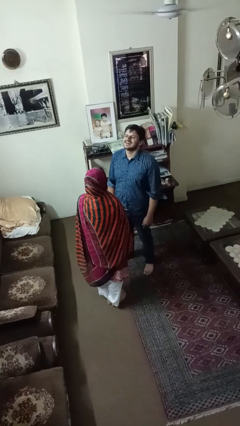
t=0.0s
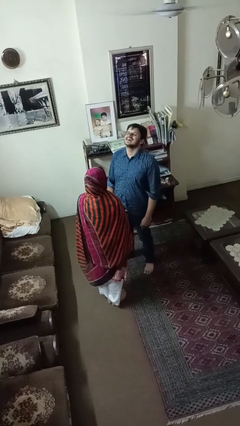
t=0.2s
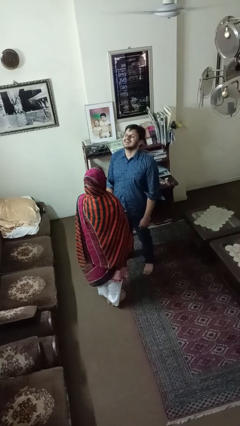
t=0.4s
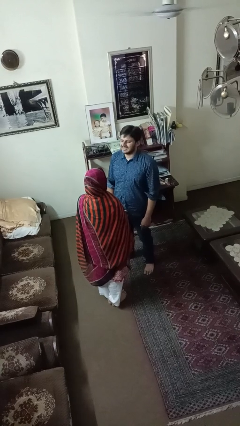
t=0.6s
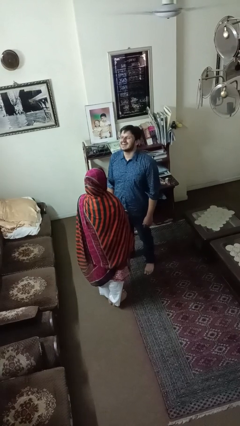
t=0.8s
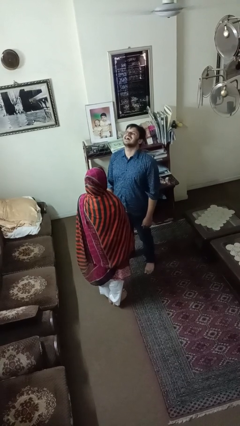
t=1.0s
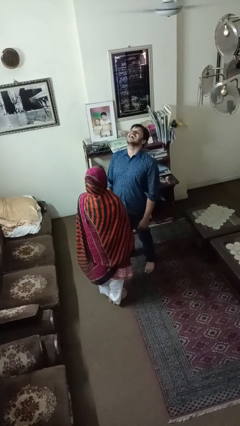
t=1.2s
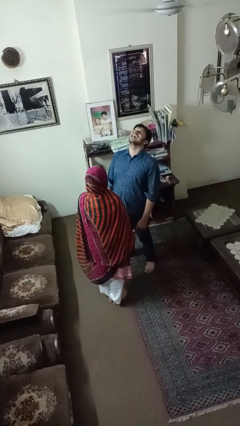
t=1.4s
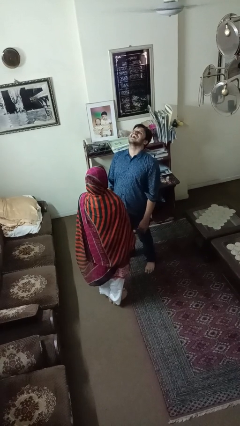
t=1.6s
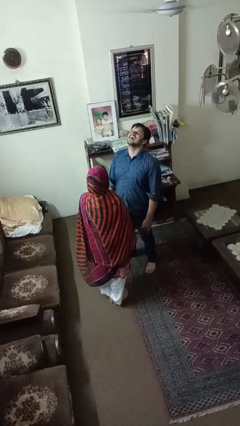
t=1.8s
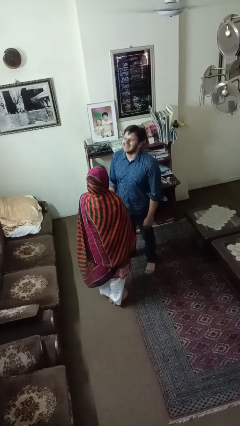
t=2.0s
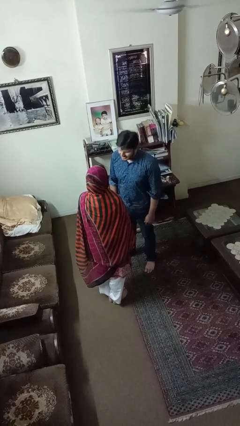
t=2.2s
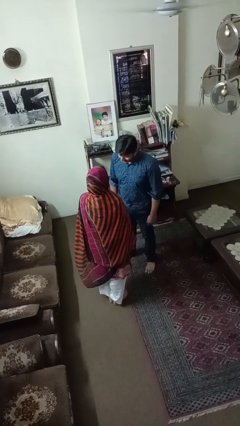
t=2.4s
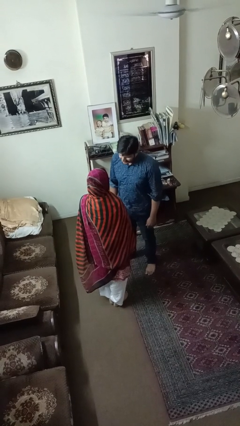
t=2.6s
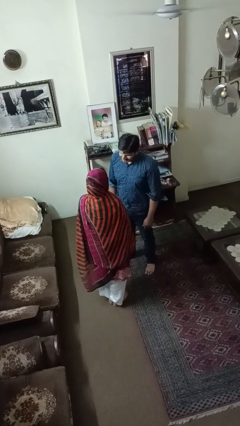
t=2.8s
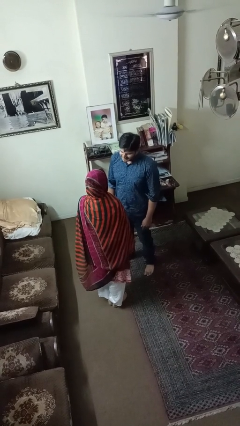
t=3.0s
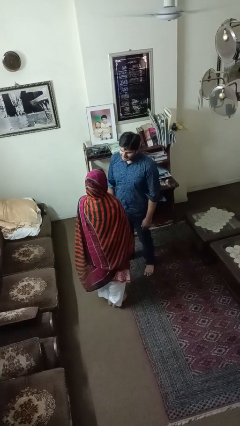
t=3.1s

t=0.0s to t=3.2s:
person laughs with person

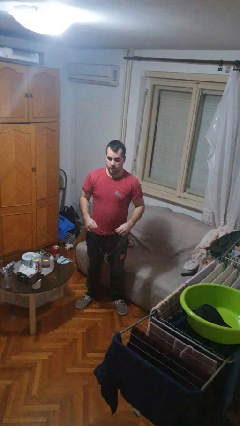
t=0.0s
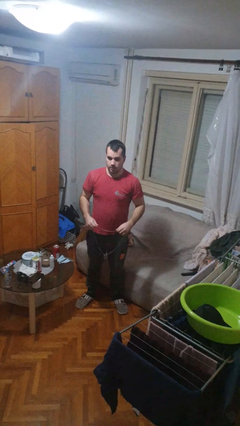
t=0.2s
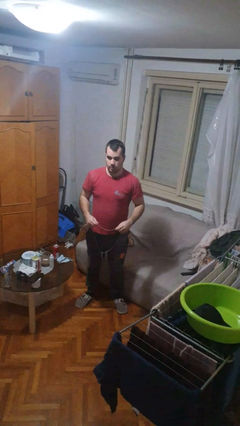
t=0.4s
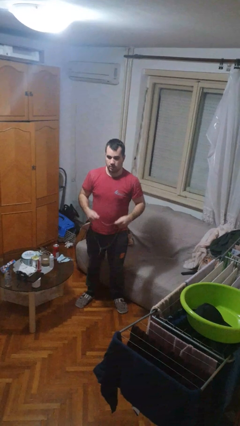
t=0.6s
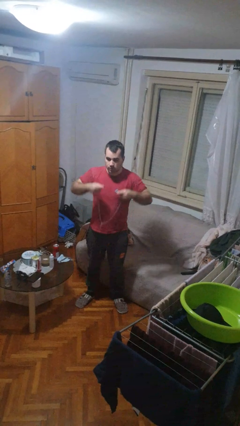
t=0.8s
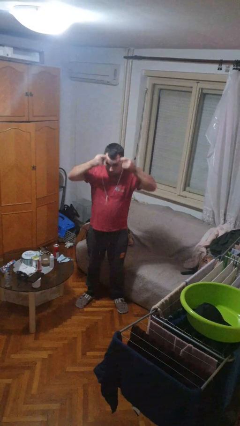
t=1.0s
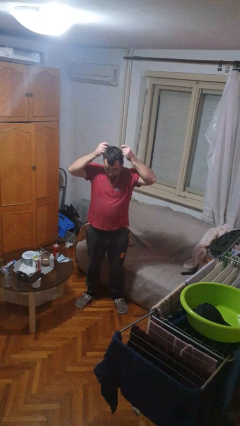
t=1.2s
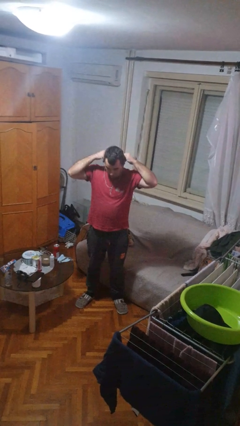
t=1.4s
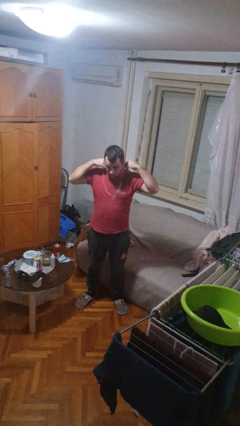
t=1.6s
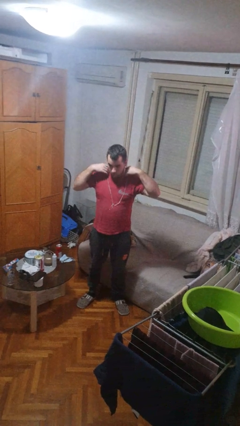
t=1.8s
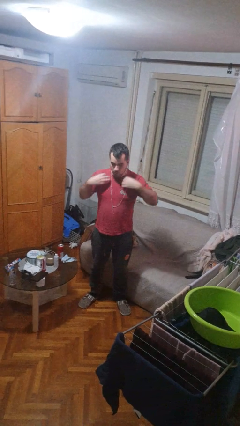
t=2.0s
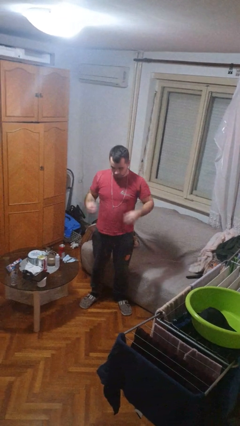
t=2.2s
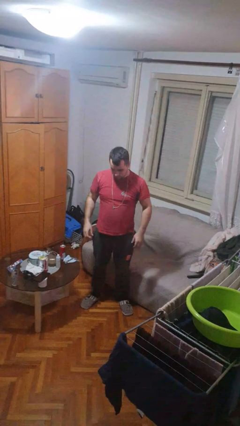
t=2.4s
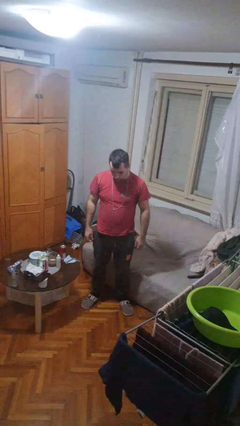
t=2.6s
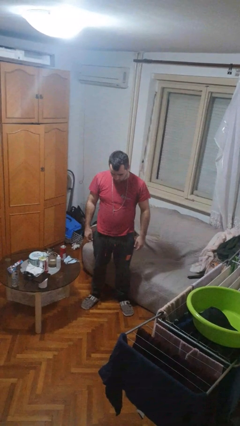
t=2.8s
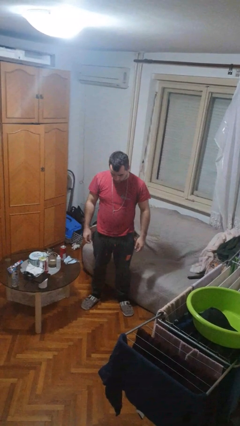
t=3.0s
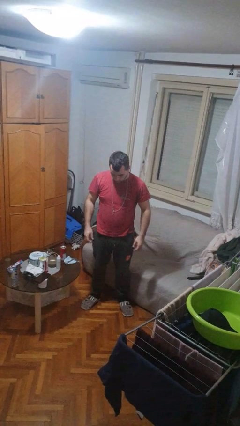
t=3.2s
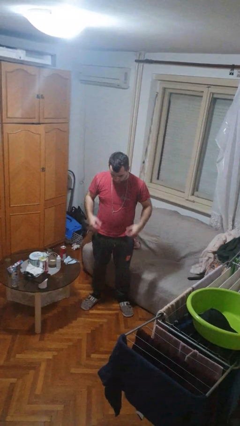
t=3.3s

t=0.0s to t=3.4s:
person puts on necklace

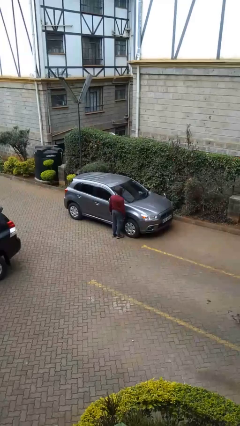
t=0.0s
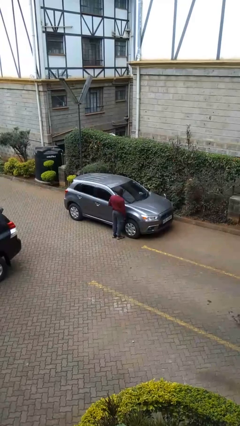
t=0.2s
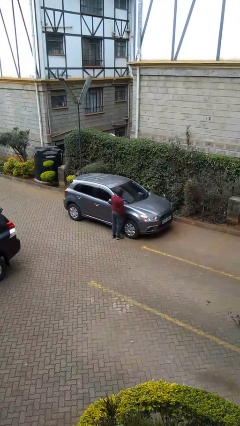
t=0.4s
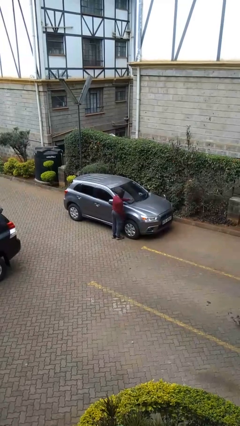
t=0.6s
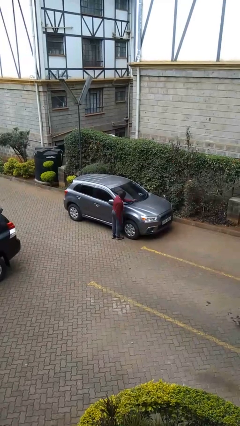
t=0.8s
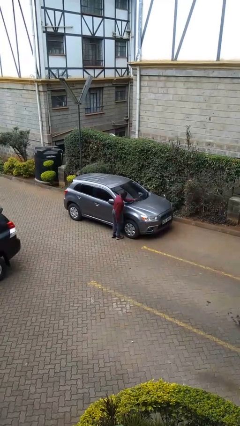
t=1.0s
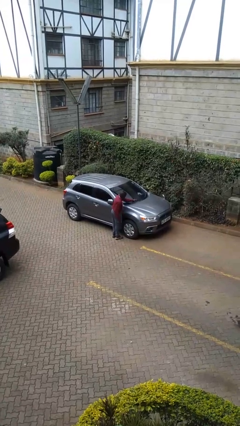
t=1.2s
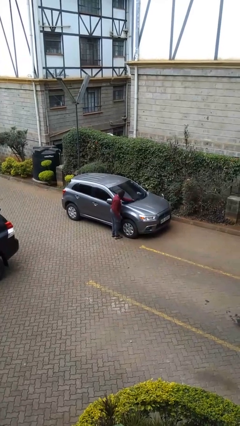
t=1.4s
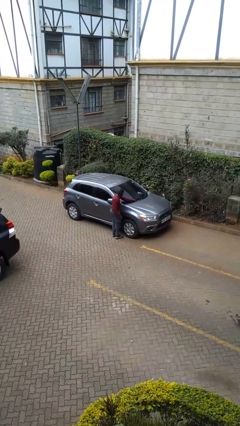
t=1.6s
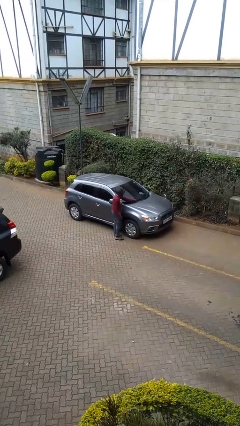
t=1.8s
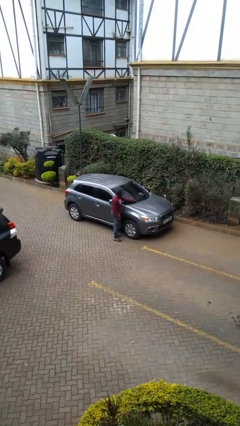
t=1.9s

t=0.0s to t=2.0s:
person flips down car wipers

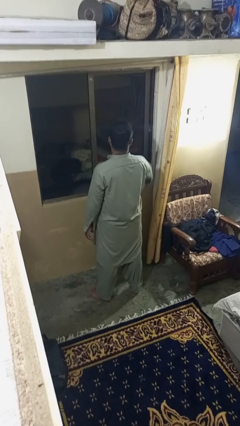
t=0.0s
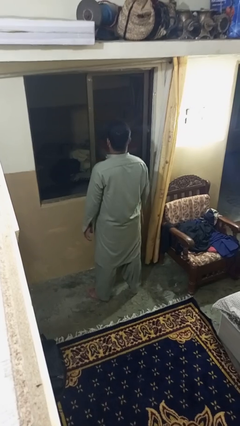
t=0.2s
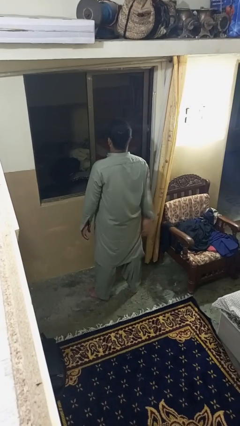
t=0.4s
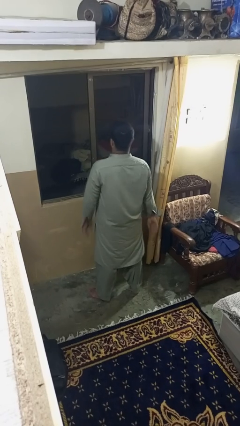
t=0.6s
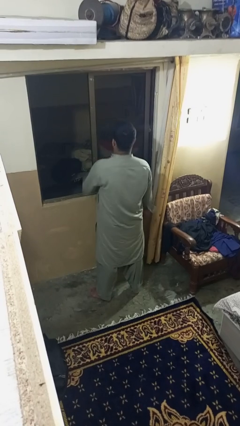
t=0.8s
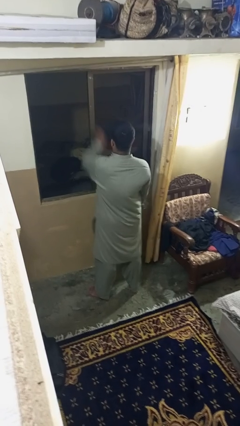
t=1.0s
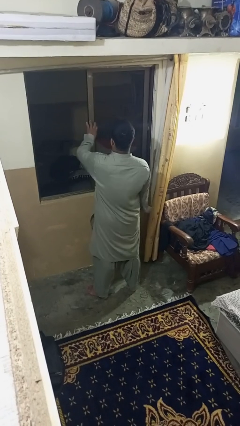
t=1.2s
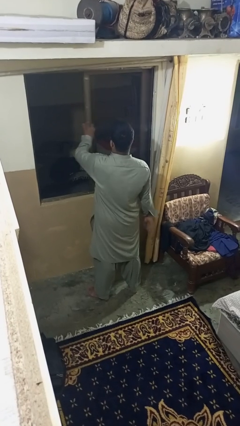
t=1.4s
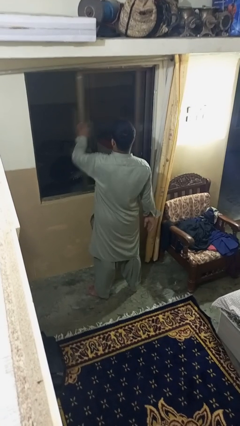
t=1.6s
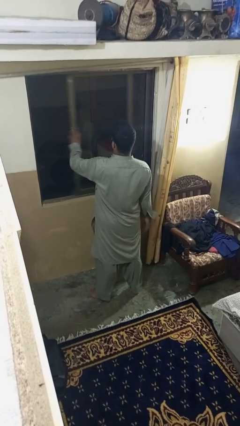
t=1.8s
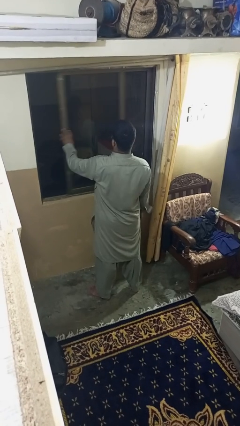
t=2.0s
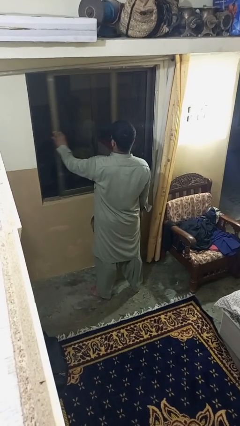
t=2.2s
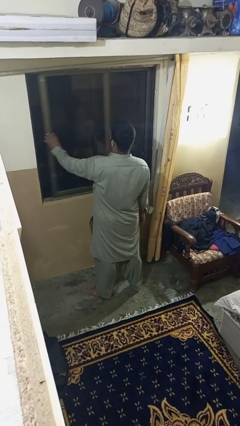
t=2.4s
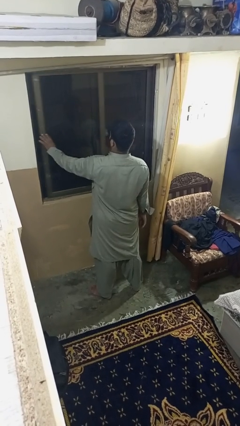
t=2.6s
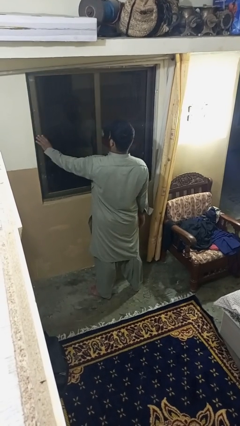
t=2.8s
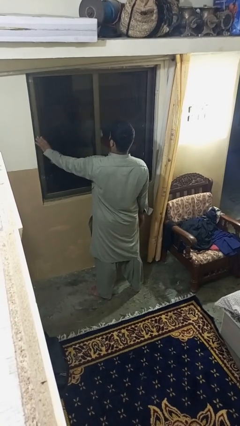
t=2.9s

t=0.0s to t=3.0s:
person closes home window

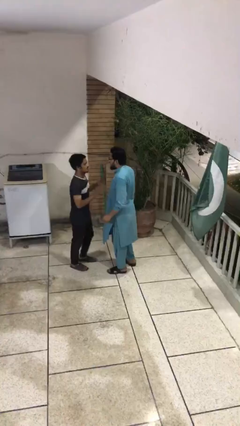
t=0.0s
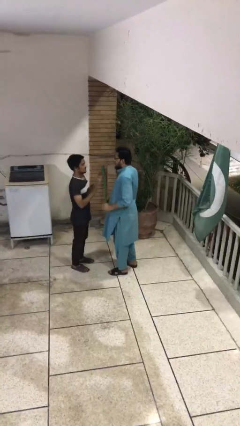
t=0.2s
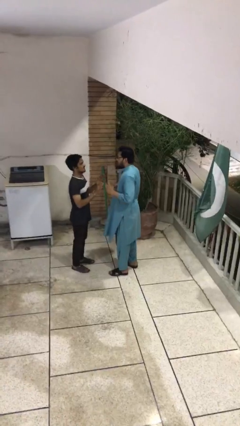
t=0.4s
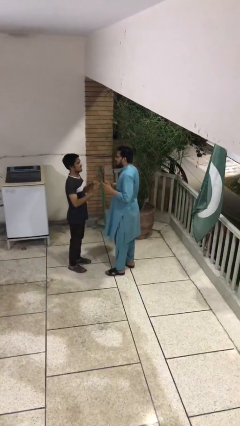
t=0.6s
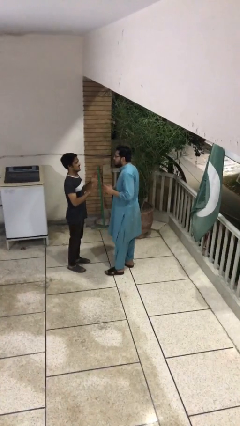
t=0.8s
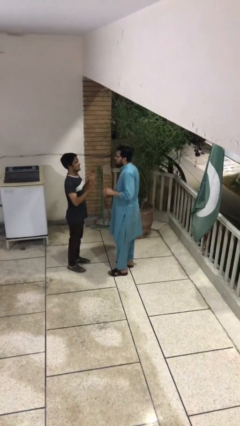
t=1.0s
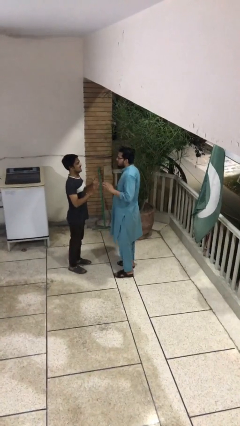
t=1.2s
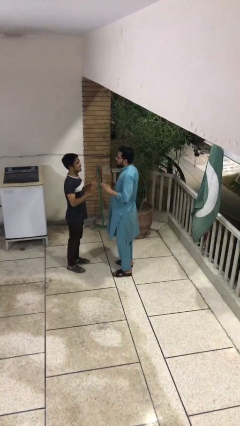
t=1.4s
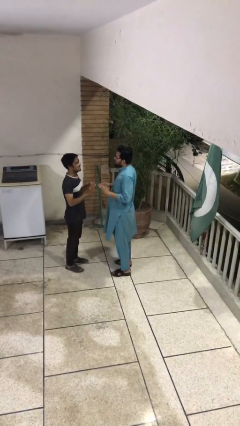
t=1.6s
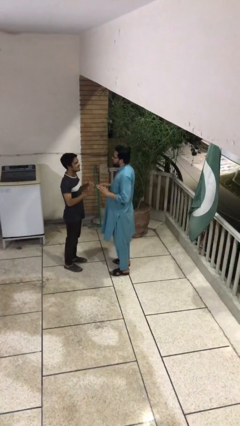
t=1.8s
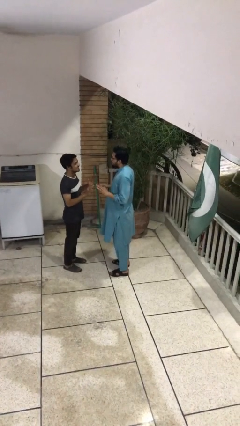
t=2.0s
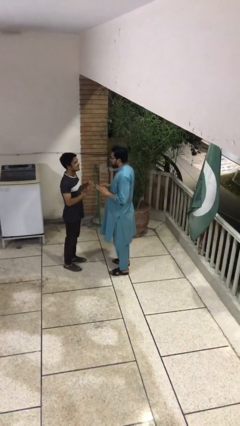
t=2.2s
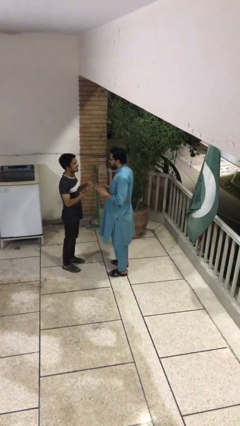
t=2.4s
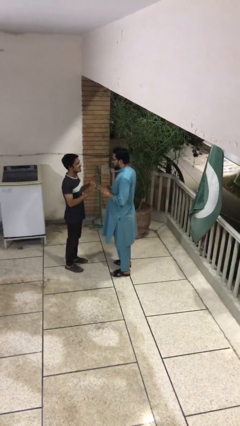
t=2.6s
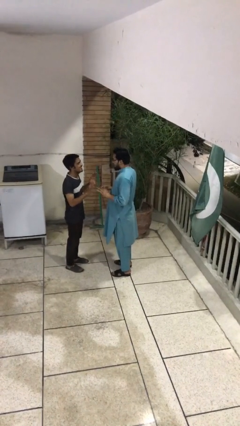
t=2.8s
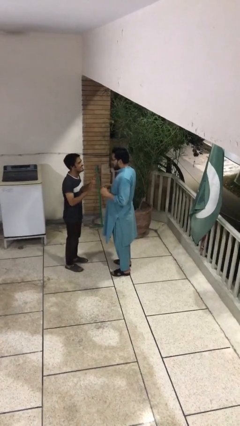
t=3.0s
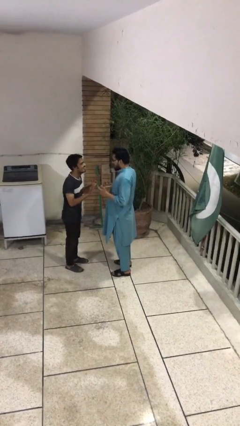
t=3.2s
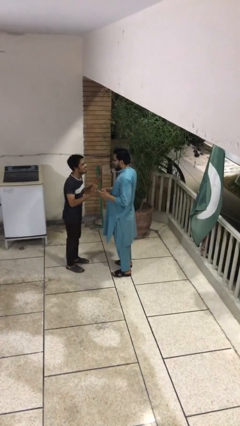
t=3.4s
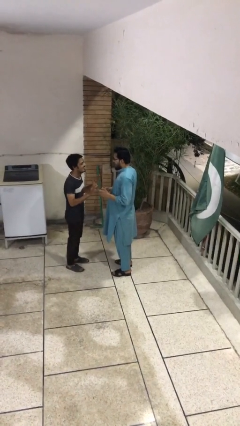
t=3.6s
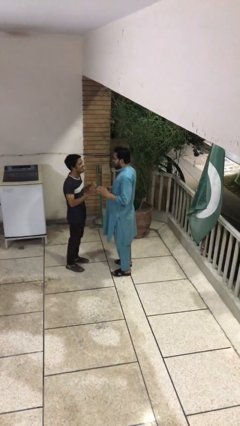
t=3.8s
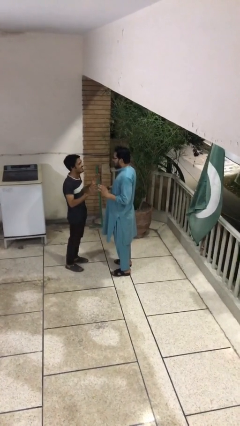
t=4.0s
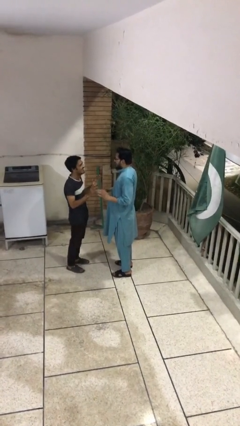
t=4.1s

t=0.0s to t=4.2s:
person talks to person

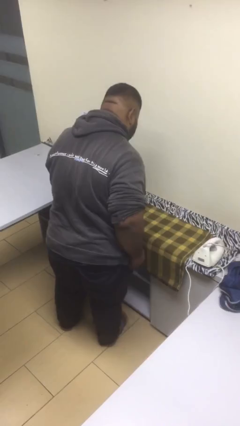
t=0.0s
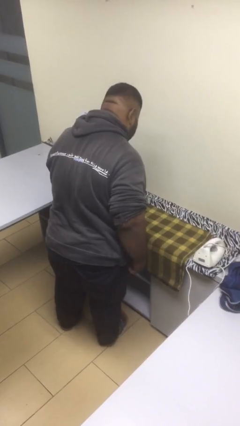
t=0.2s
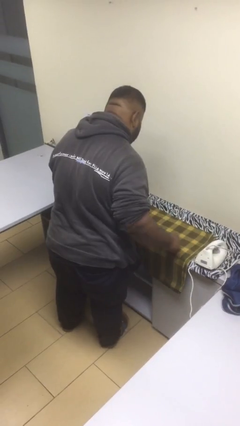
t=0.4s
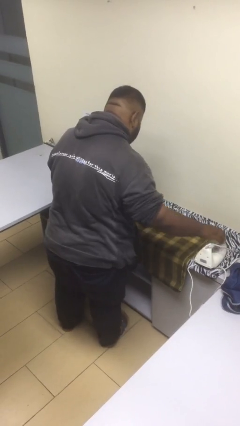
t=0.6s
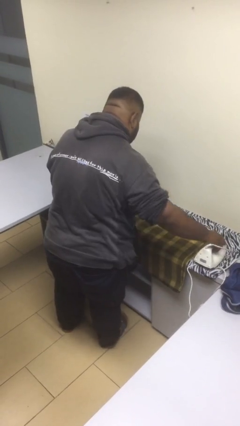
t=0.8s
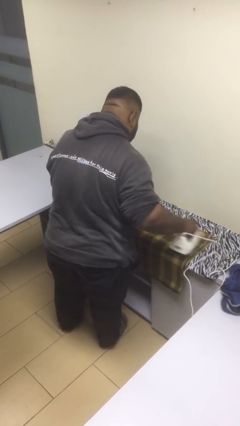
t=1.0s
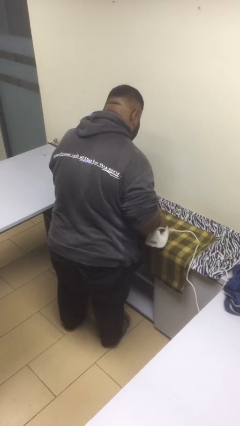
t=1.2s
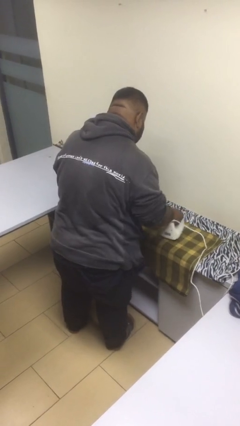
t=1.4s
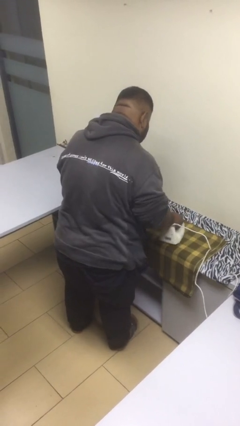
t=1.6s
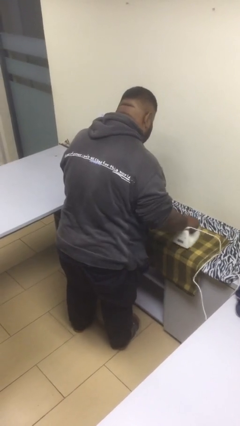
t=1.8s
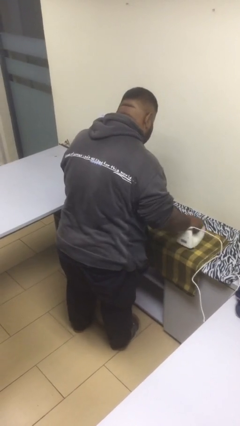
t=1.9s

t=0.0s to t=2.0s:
person irons clothes
